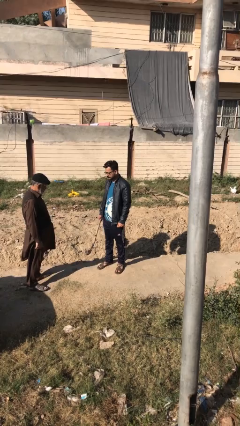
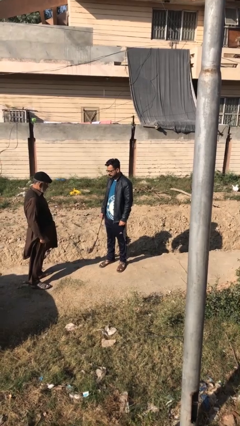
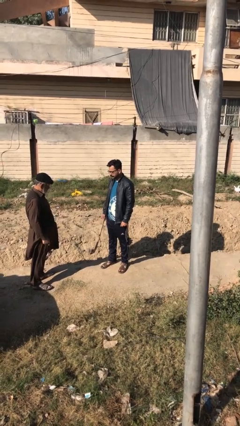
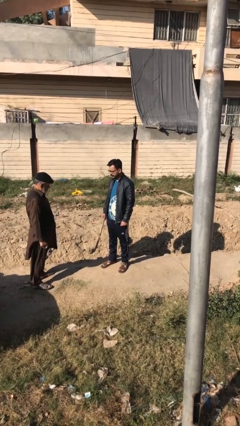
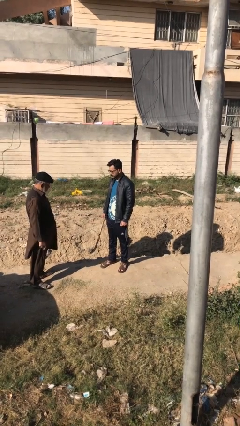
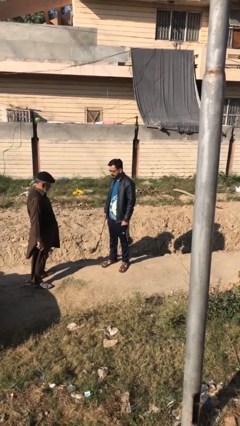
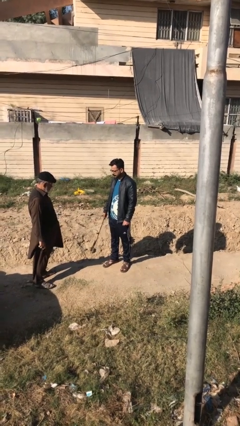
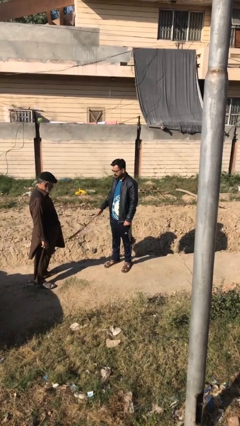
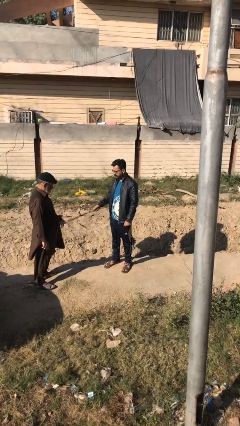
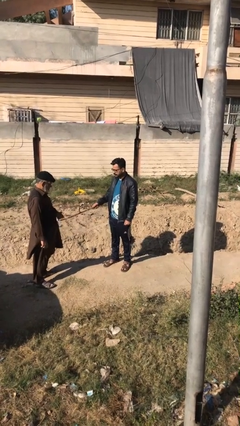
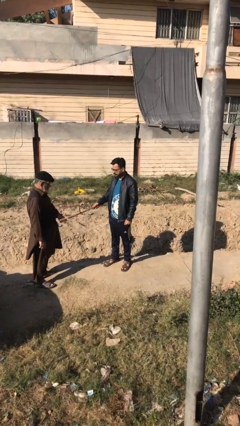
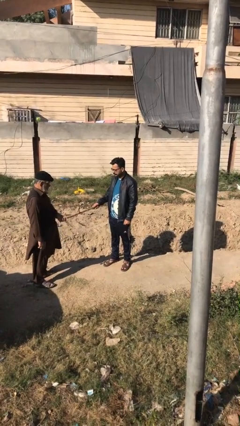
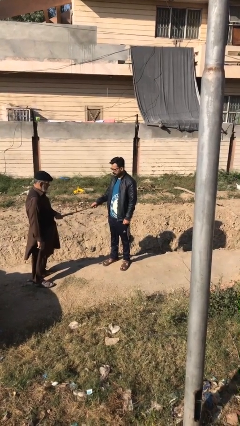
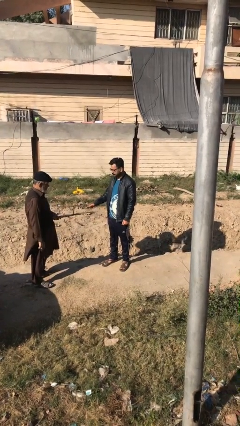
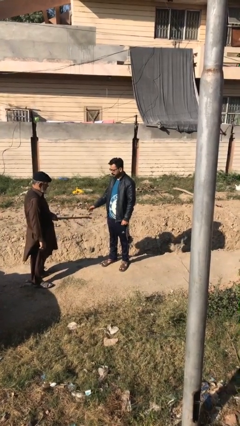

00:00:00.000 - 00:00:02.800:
person transfers object to person

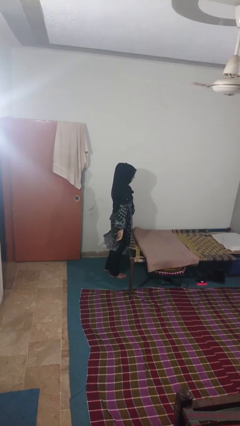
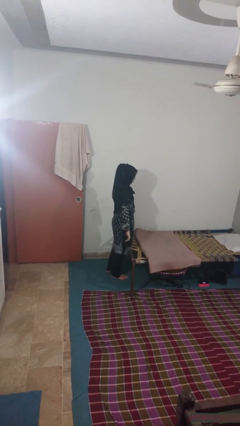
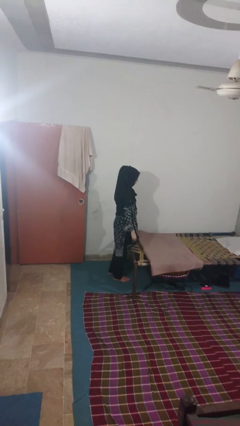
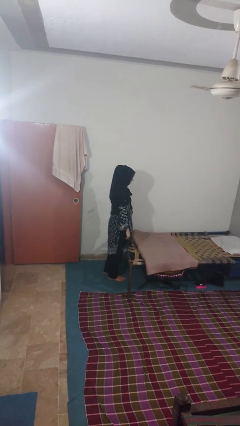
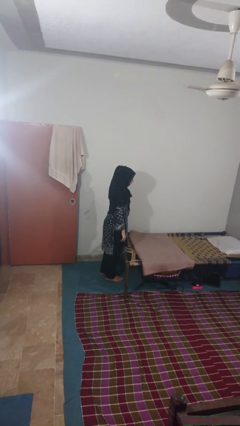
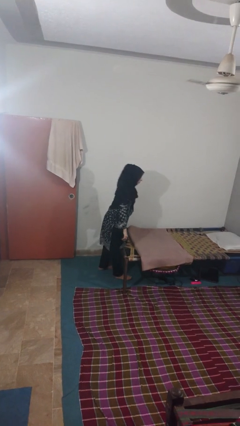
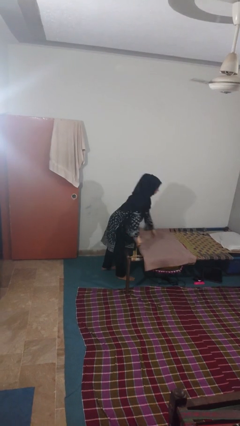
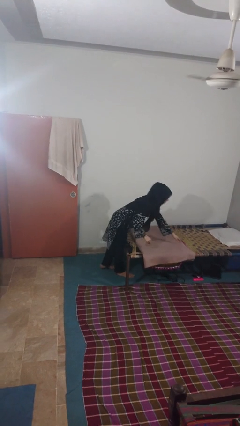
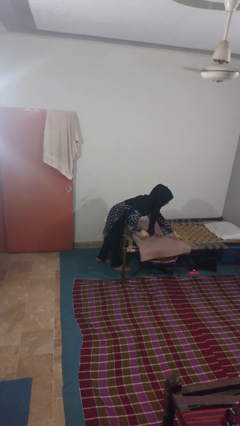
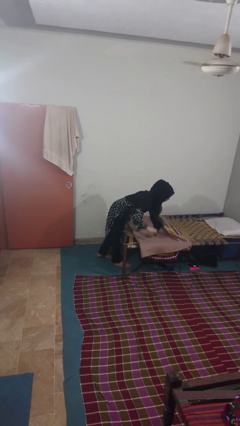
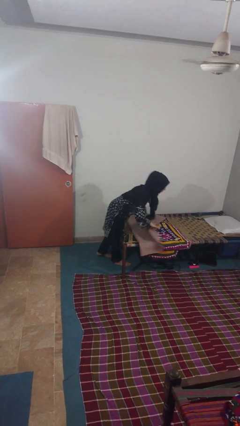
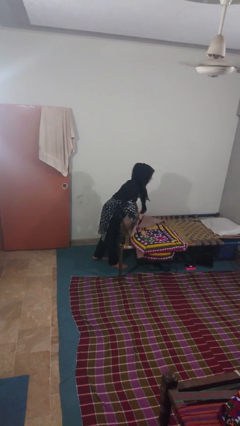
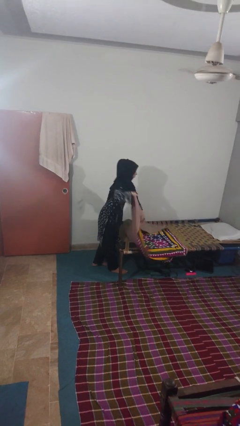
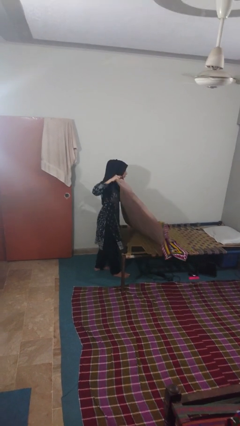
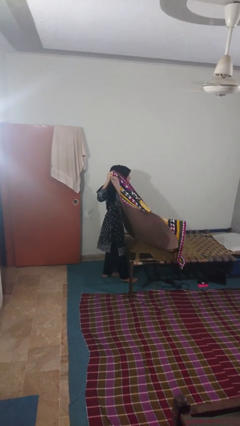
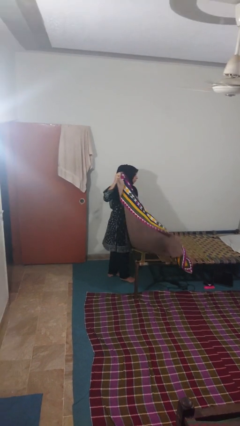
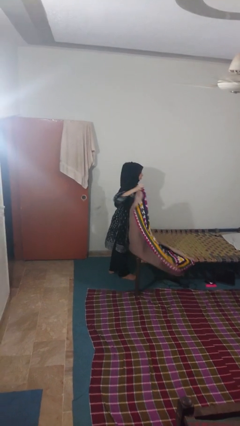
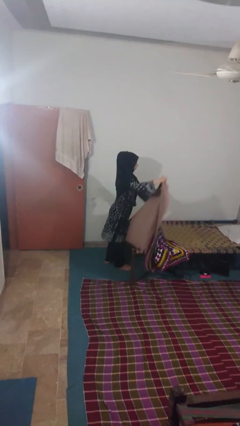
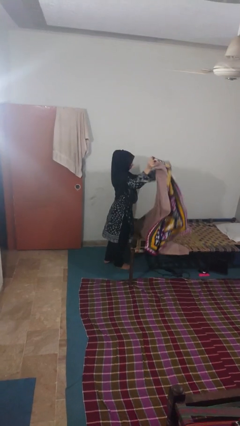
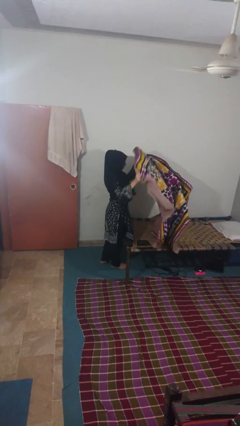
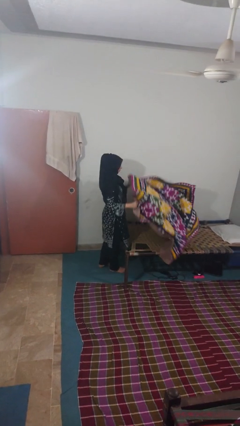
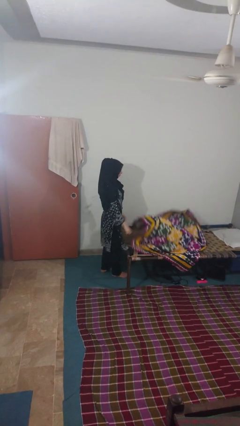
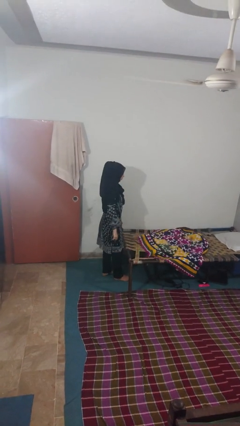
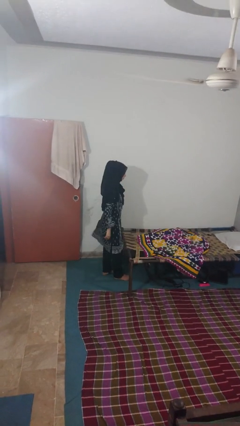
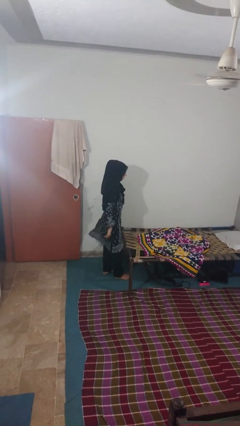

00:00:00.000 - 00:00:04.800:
person unfolds blanket

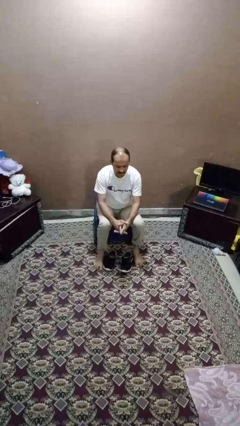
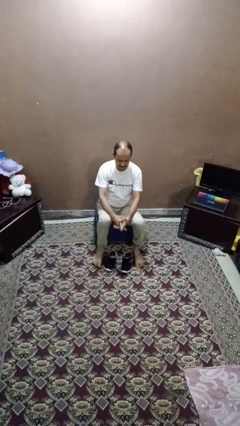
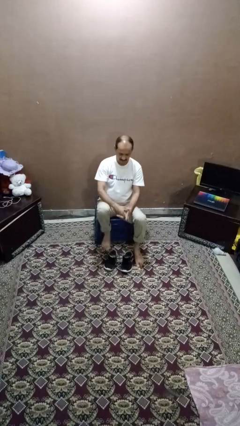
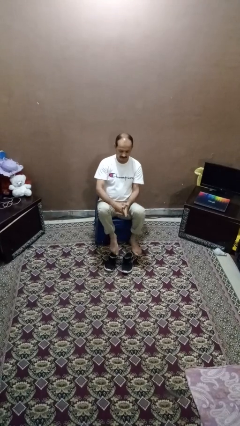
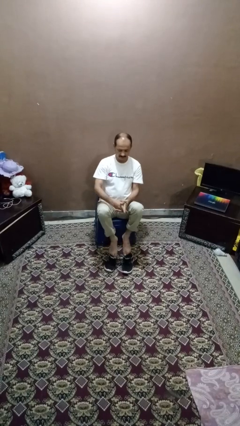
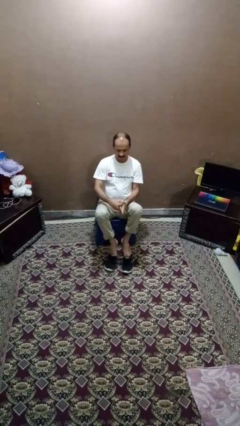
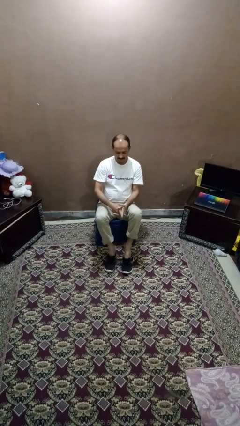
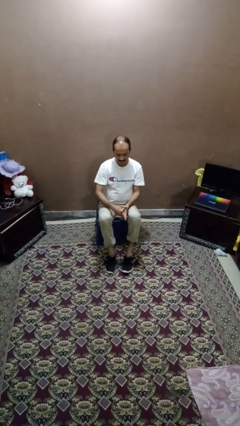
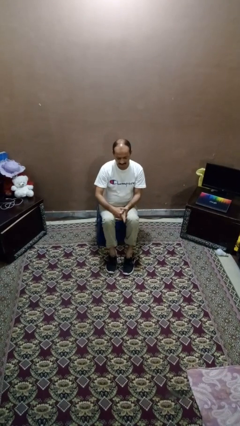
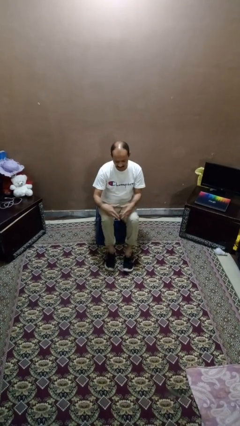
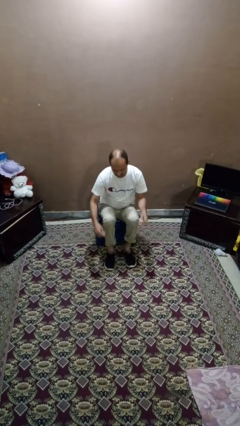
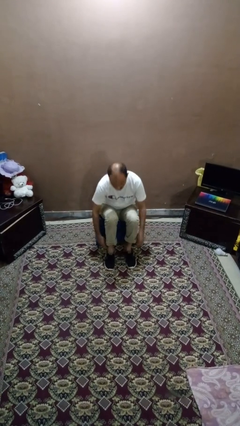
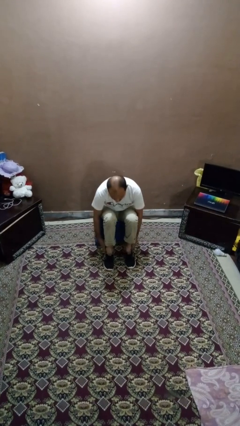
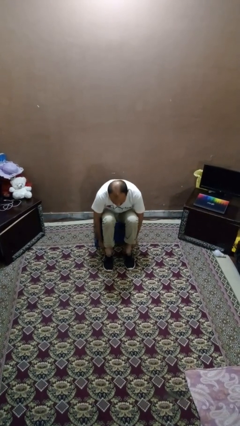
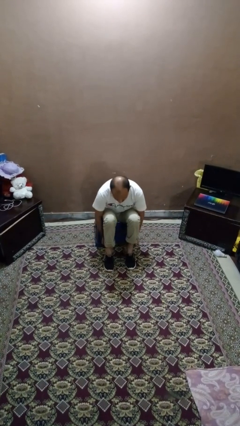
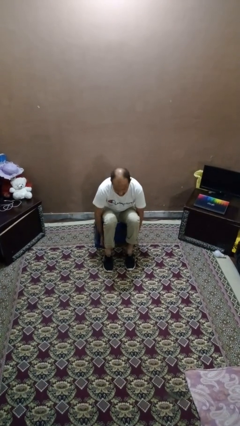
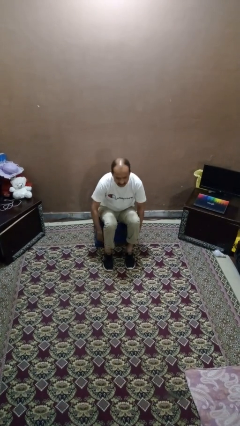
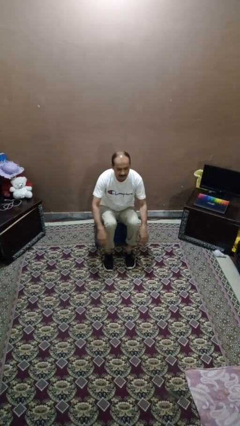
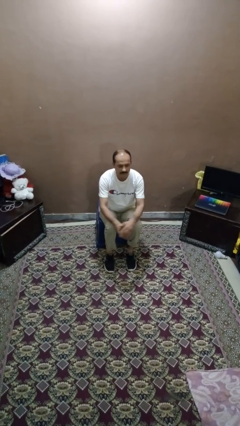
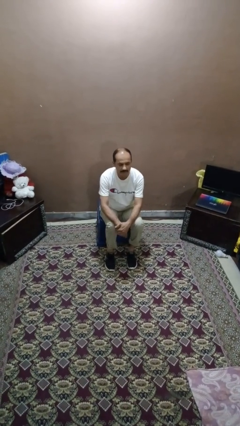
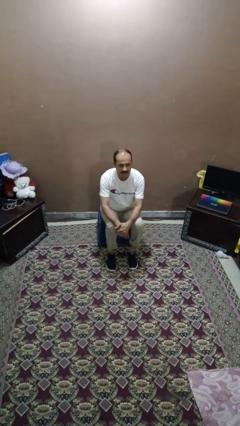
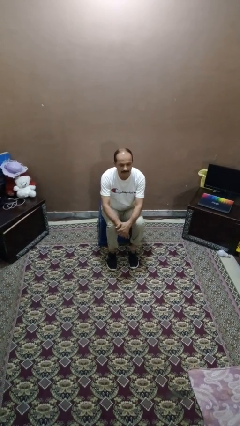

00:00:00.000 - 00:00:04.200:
person puts on shoes

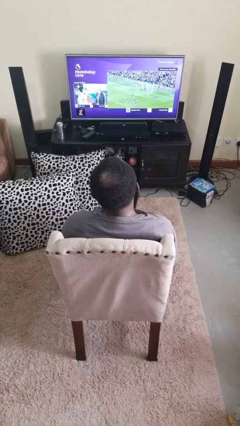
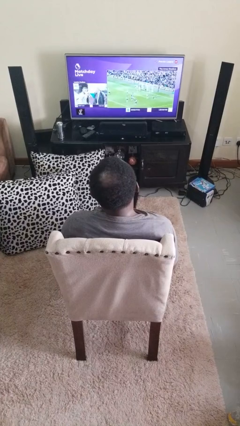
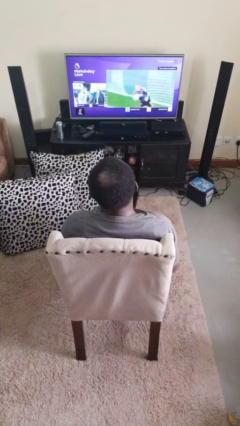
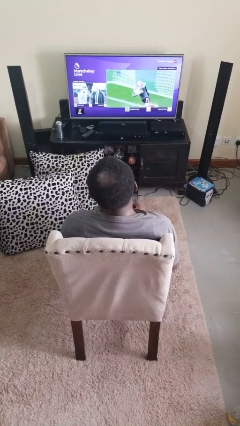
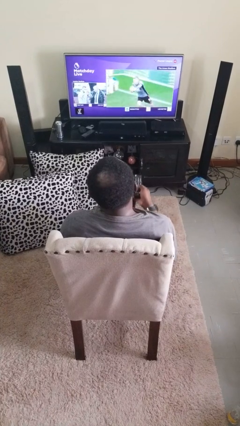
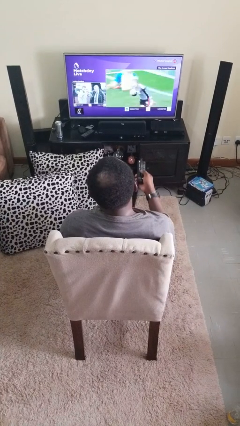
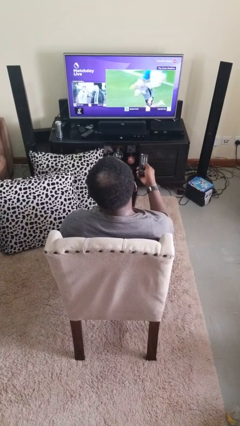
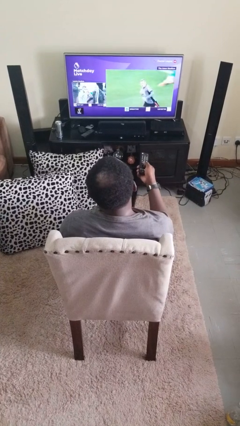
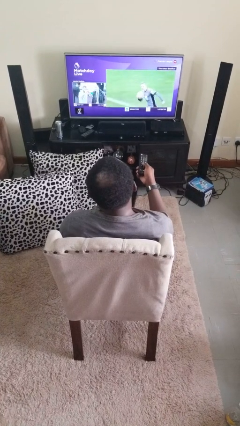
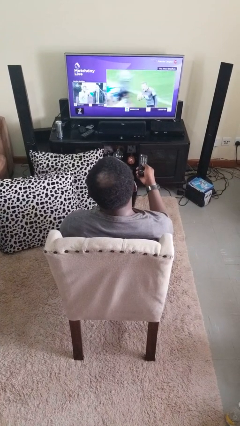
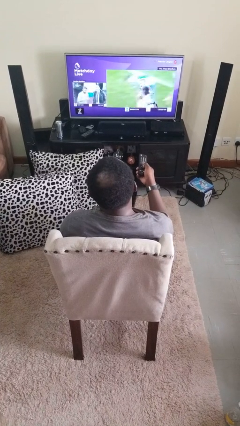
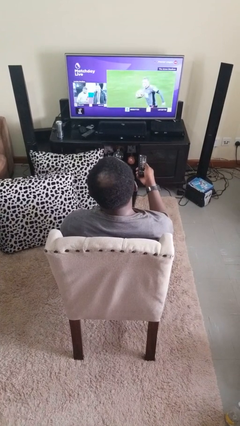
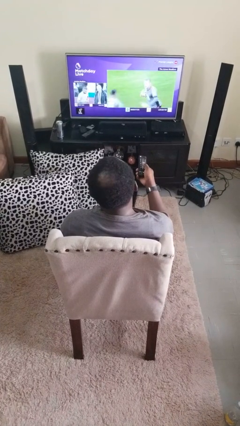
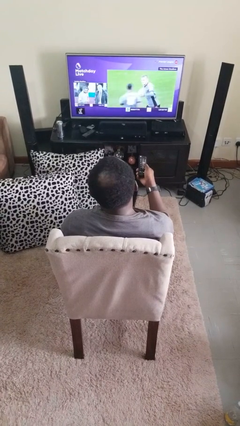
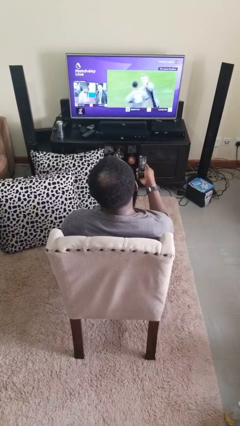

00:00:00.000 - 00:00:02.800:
person uses television remote

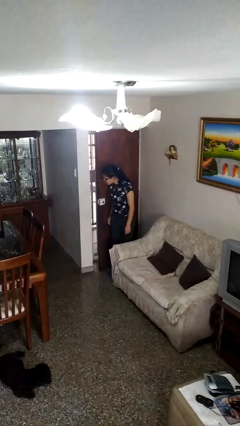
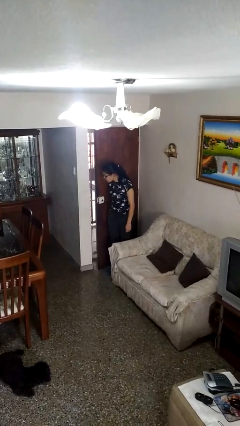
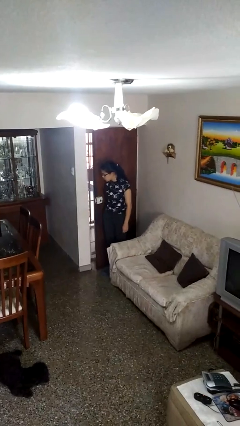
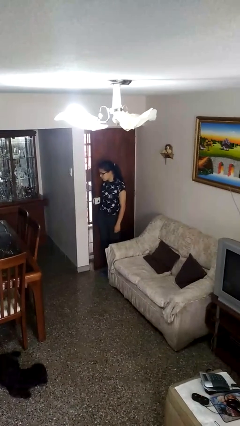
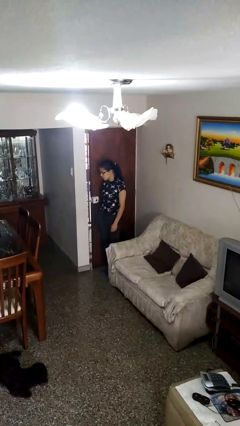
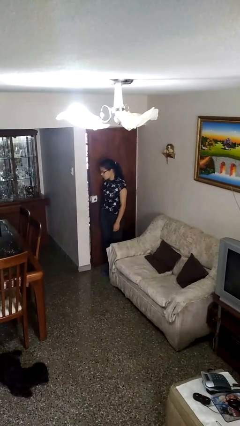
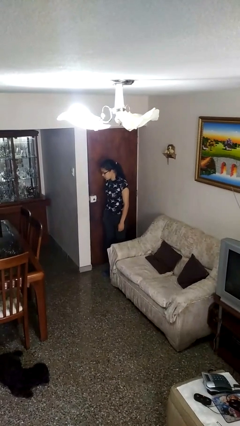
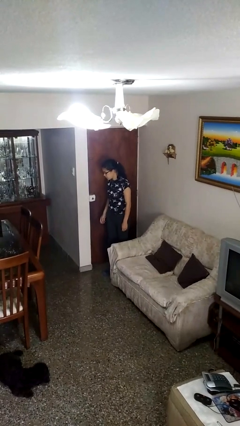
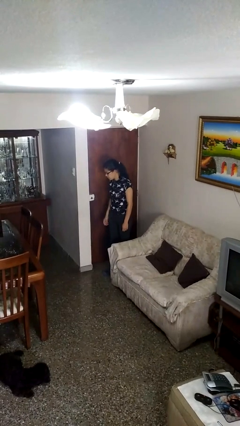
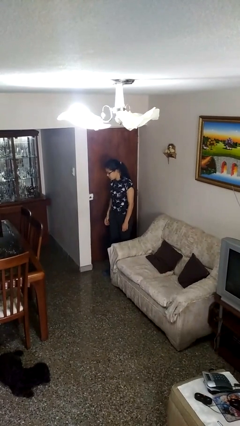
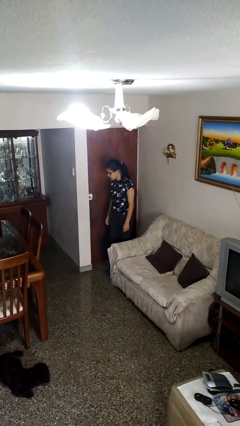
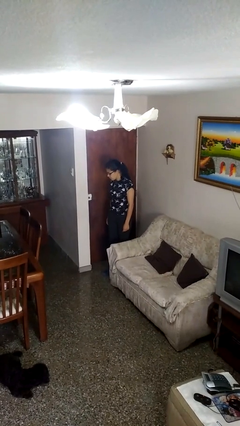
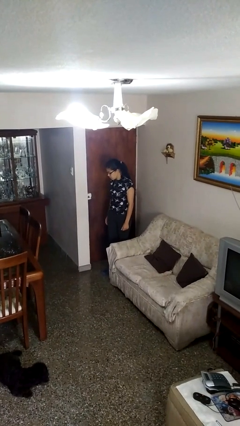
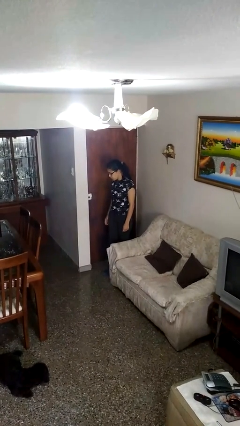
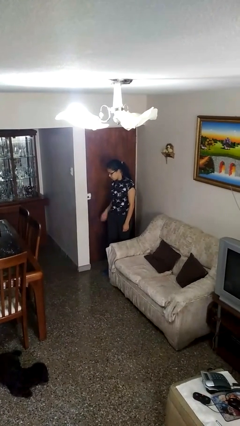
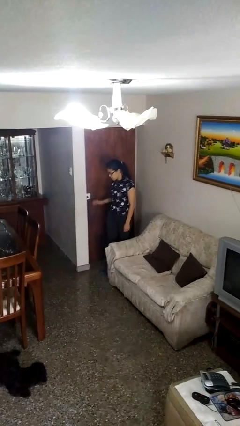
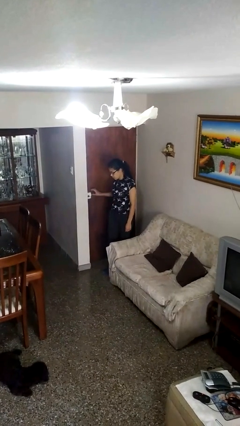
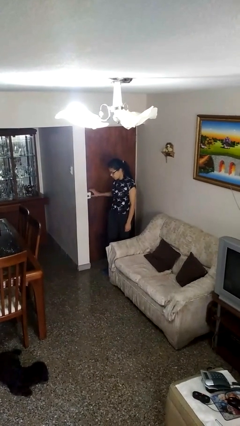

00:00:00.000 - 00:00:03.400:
person closes door with hip
